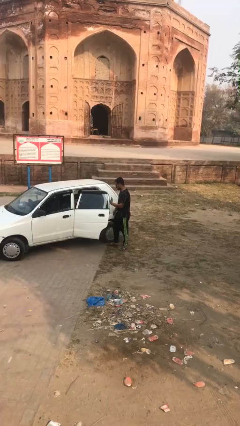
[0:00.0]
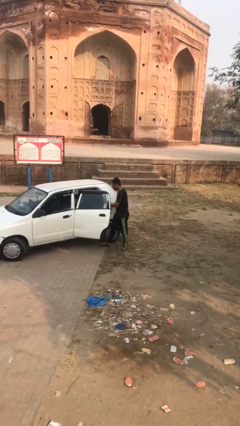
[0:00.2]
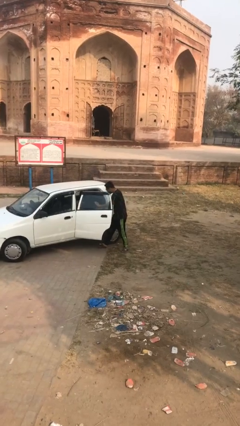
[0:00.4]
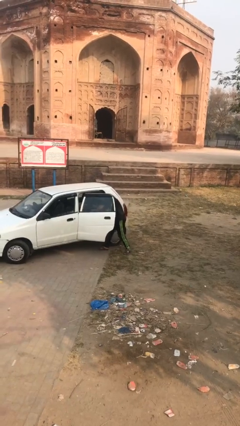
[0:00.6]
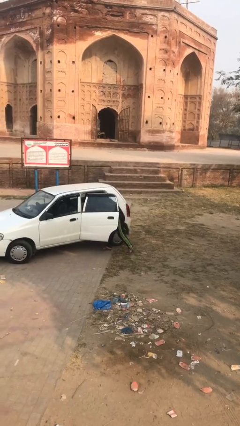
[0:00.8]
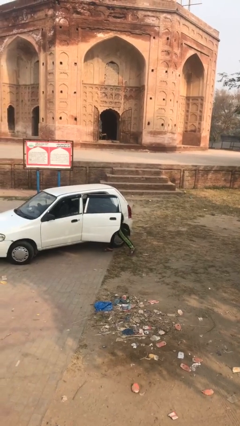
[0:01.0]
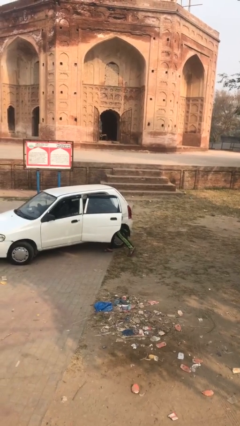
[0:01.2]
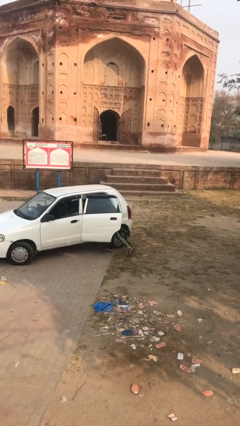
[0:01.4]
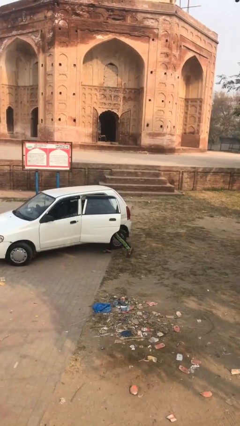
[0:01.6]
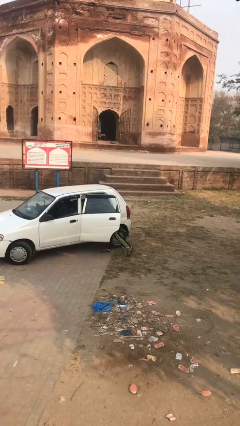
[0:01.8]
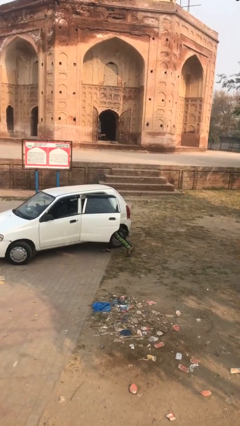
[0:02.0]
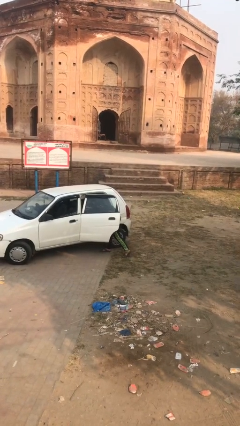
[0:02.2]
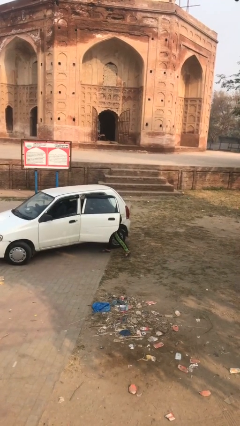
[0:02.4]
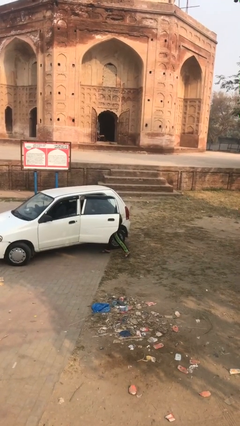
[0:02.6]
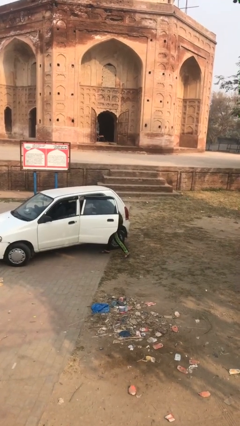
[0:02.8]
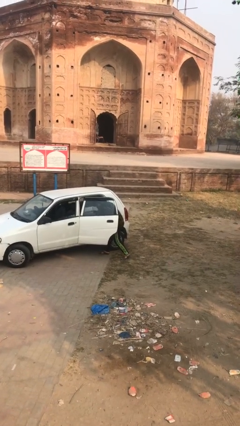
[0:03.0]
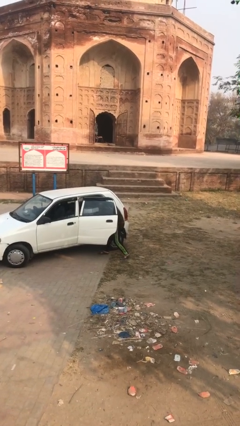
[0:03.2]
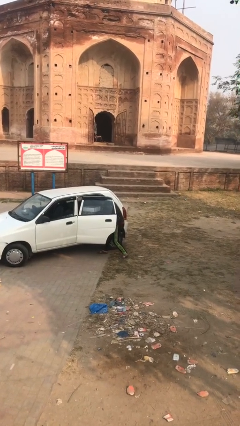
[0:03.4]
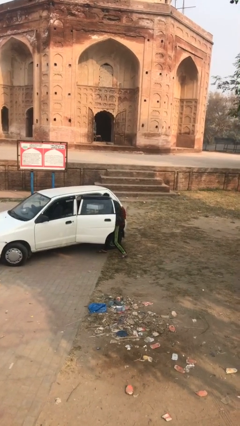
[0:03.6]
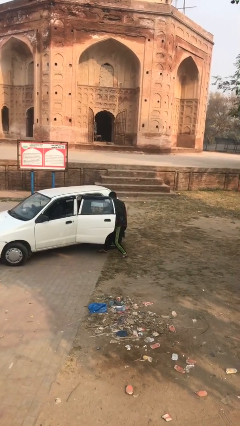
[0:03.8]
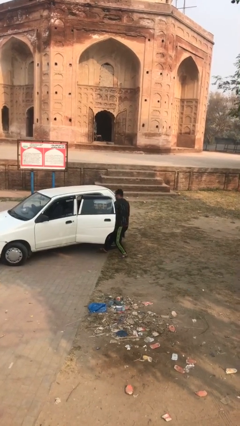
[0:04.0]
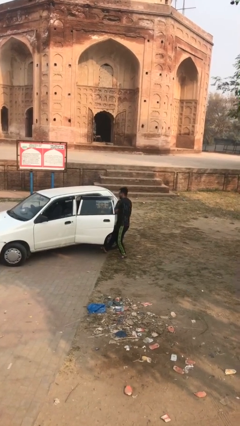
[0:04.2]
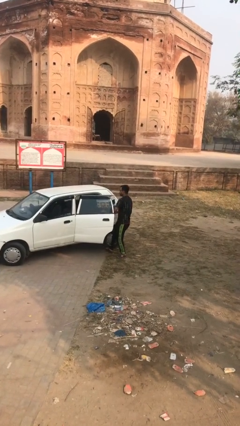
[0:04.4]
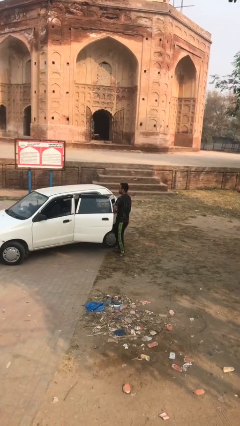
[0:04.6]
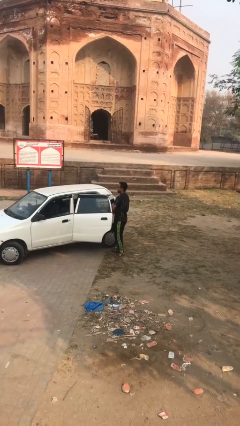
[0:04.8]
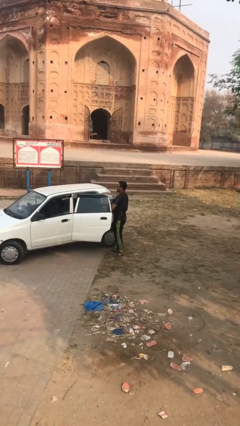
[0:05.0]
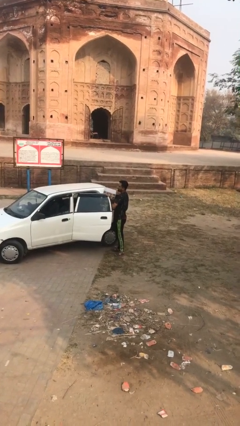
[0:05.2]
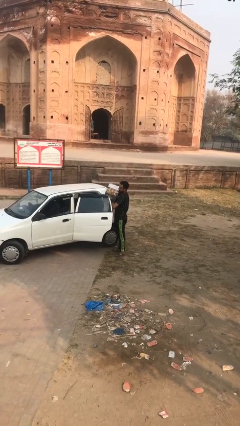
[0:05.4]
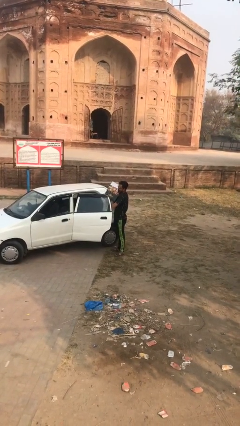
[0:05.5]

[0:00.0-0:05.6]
person unloads car

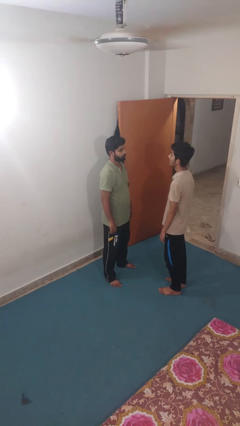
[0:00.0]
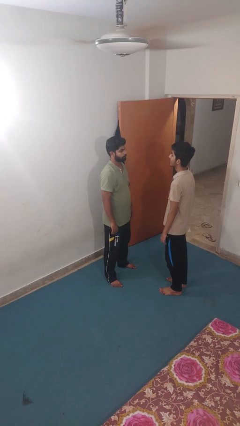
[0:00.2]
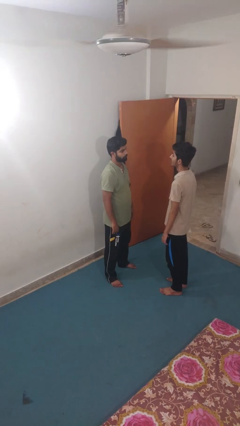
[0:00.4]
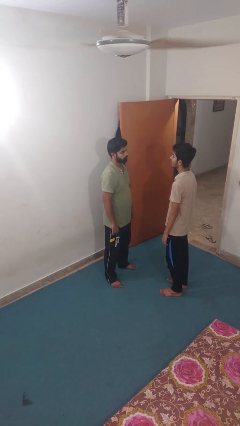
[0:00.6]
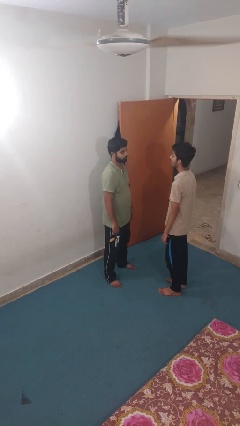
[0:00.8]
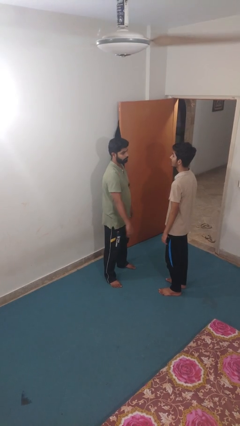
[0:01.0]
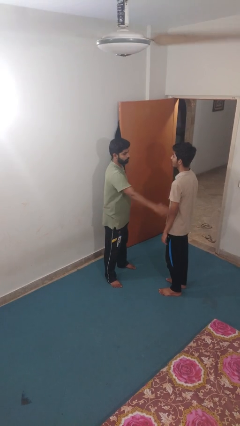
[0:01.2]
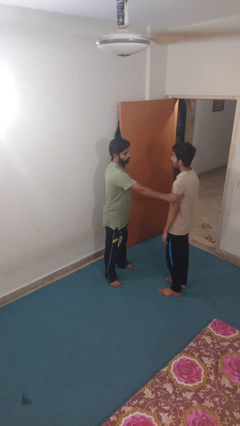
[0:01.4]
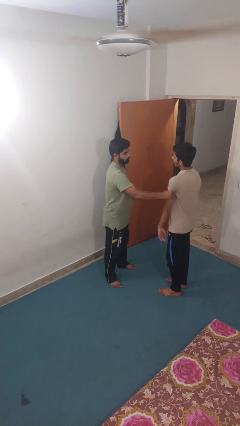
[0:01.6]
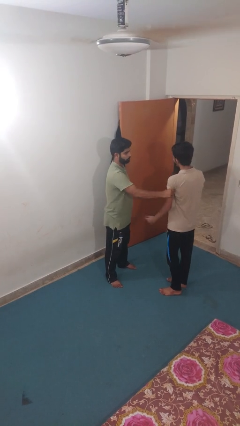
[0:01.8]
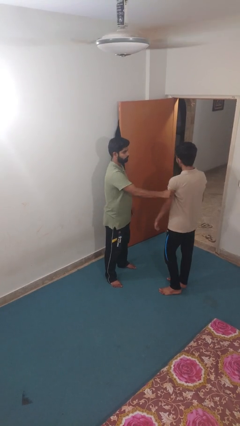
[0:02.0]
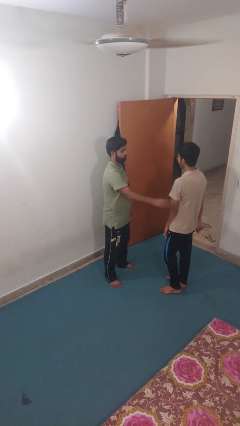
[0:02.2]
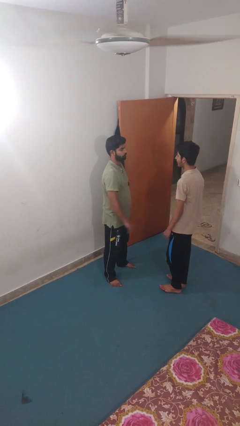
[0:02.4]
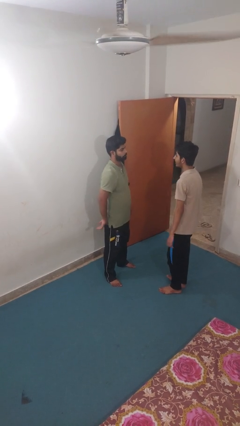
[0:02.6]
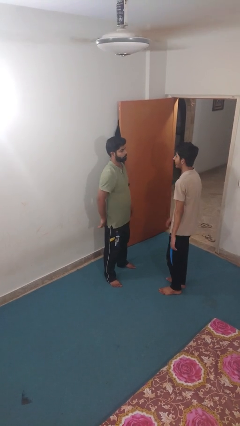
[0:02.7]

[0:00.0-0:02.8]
person grabs person by bicep

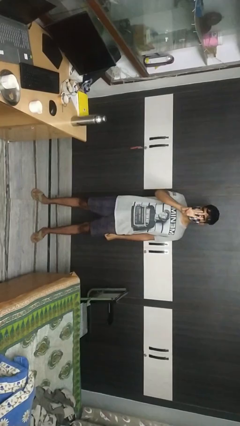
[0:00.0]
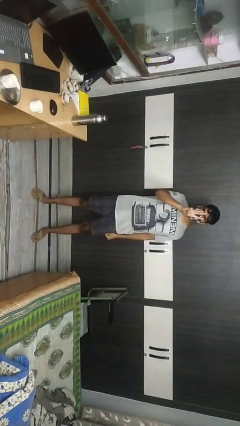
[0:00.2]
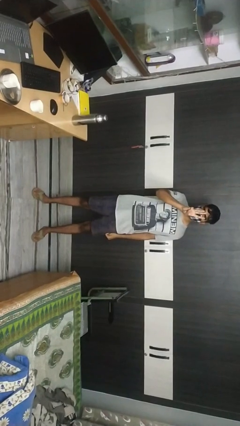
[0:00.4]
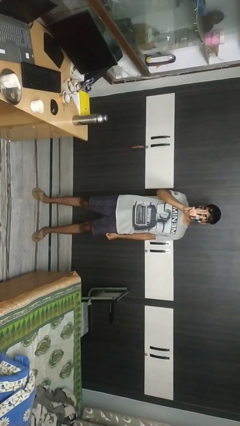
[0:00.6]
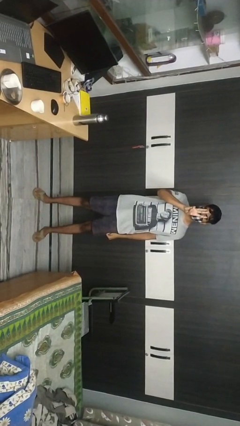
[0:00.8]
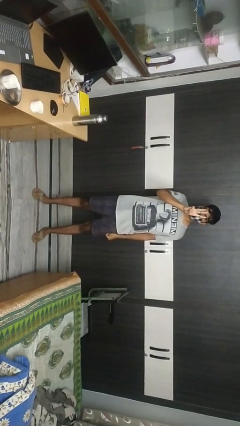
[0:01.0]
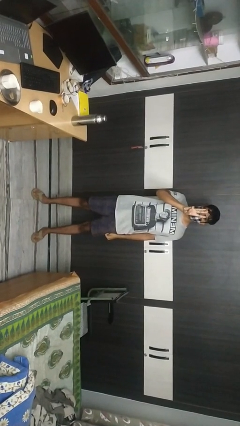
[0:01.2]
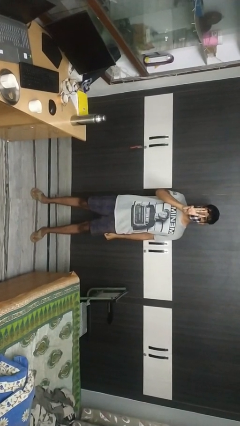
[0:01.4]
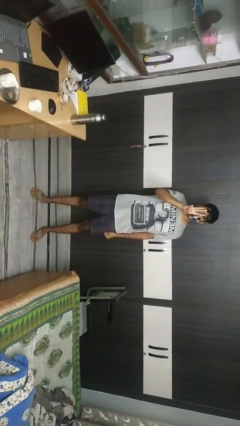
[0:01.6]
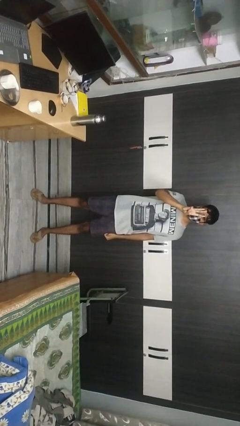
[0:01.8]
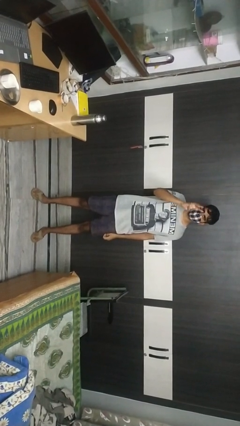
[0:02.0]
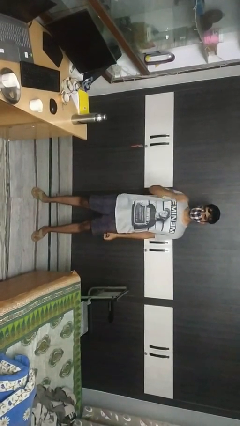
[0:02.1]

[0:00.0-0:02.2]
person gestures number three

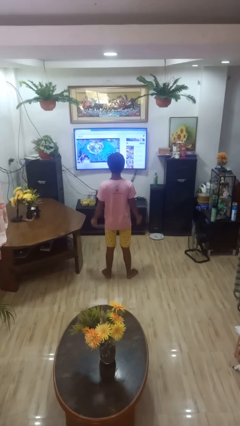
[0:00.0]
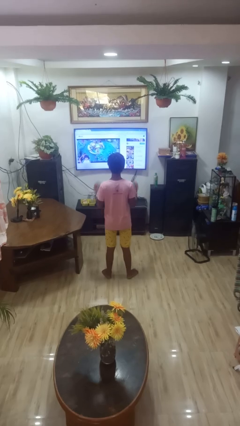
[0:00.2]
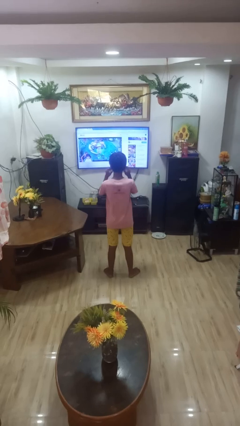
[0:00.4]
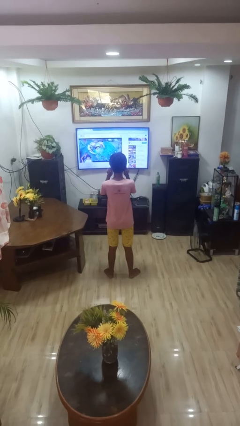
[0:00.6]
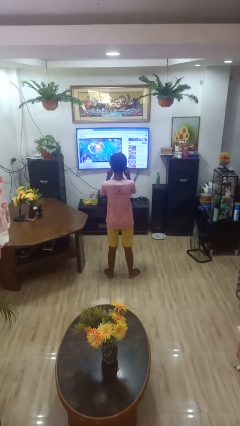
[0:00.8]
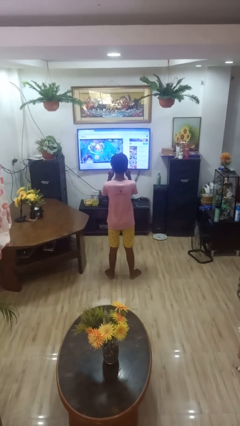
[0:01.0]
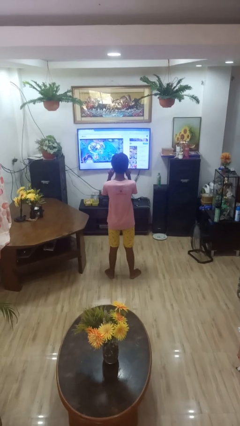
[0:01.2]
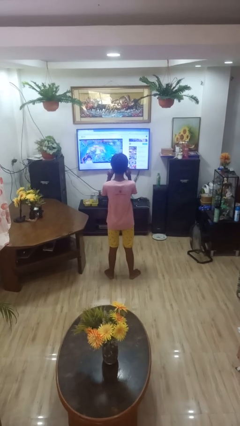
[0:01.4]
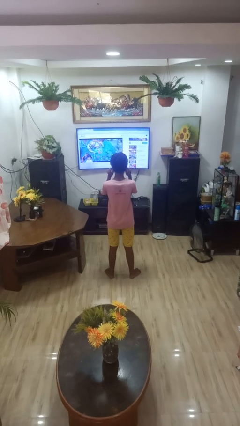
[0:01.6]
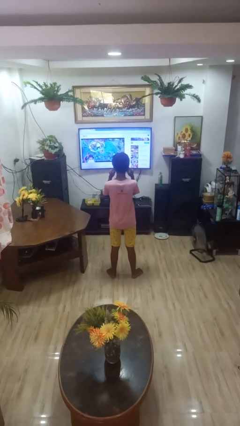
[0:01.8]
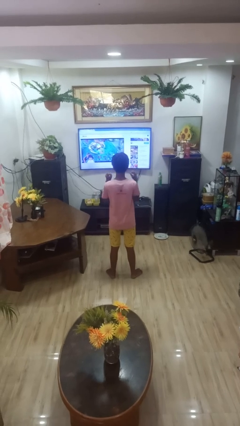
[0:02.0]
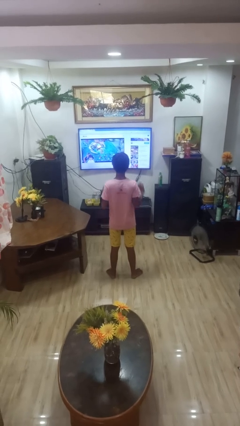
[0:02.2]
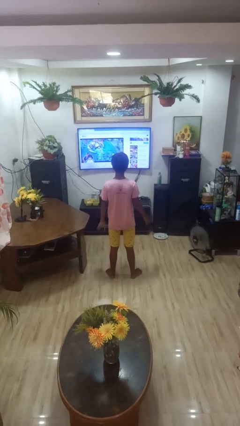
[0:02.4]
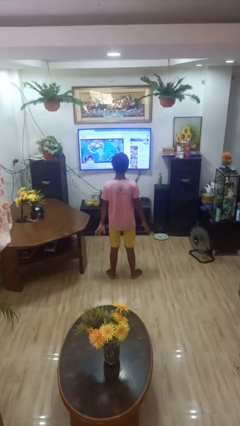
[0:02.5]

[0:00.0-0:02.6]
person touches earlobe

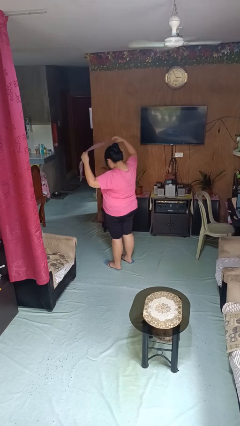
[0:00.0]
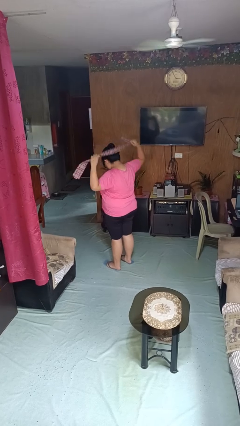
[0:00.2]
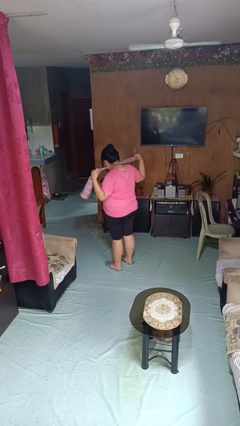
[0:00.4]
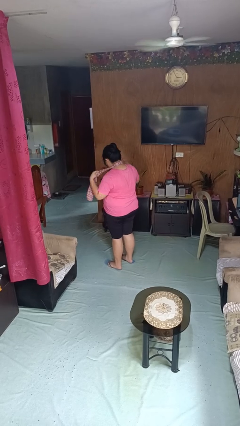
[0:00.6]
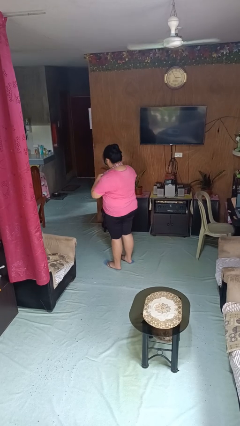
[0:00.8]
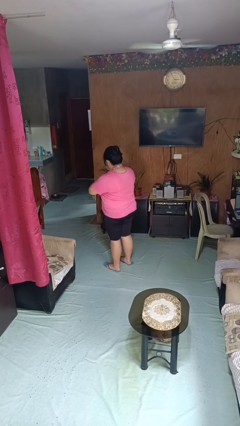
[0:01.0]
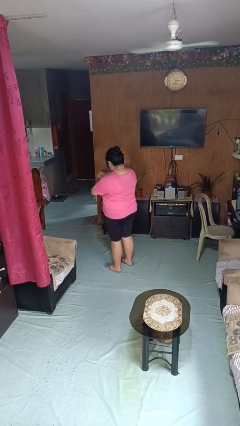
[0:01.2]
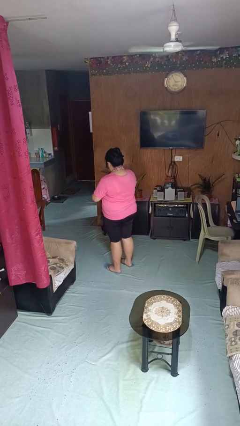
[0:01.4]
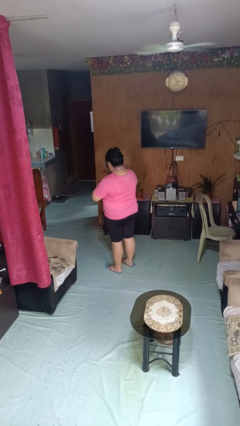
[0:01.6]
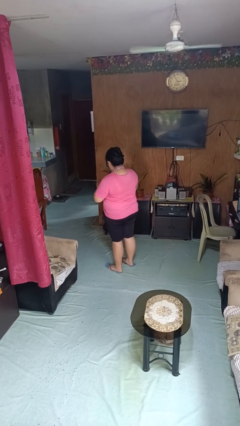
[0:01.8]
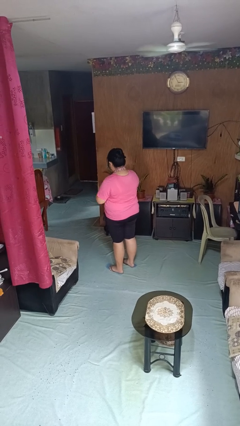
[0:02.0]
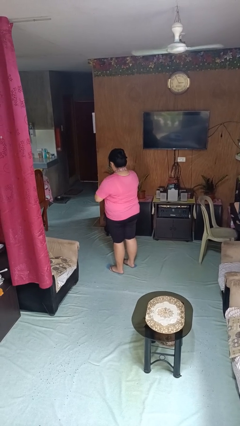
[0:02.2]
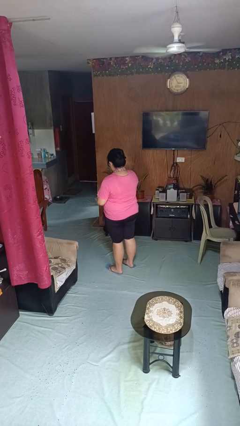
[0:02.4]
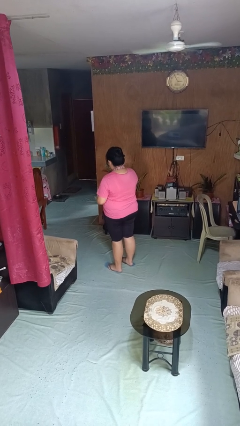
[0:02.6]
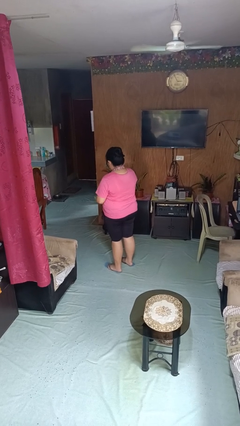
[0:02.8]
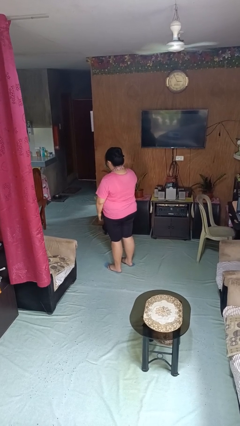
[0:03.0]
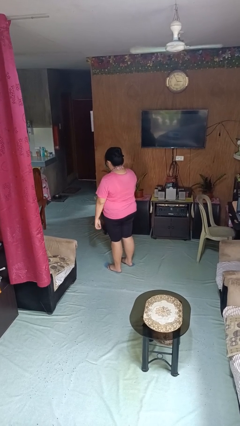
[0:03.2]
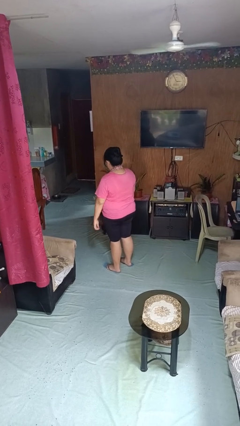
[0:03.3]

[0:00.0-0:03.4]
person puts on necktie

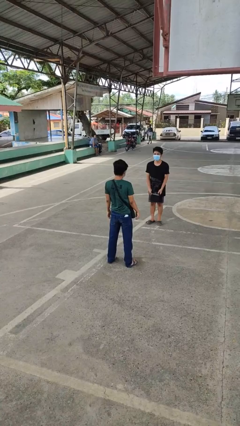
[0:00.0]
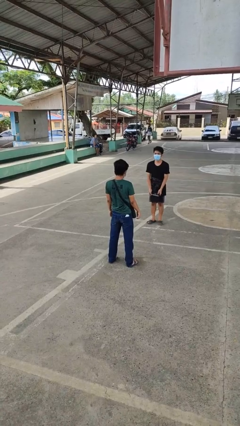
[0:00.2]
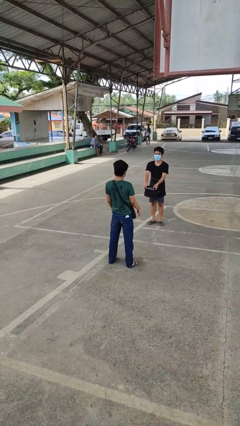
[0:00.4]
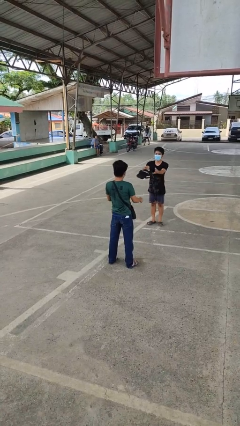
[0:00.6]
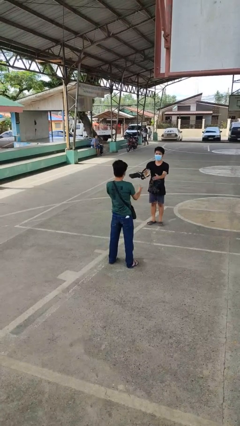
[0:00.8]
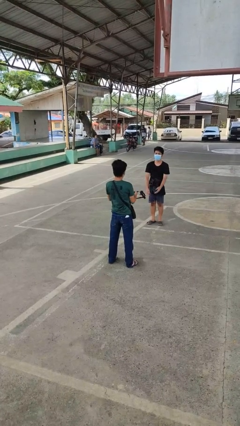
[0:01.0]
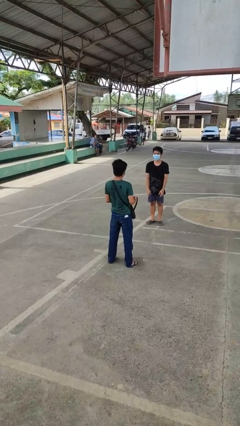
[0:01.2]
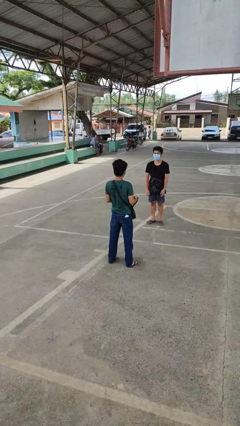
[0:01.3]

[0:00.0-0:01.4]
person catches object from person
